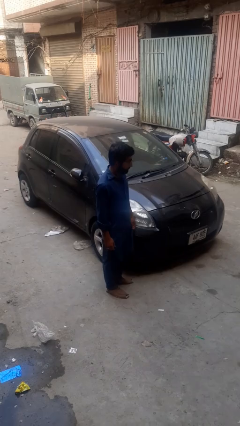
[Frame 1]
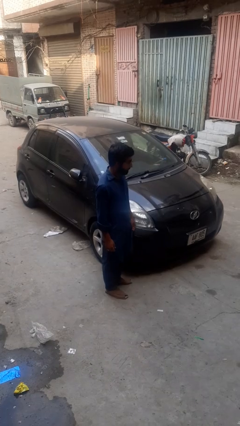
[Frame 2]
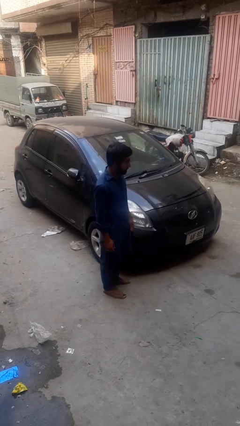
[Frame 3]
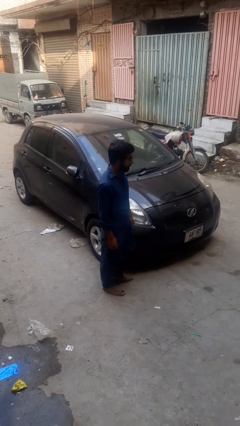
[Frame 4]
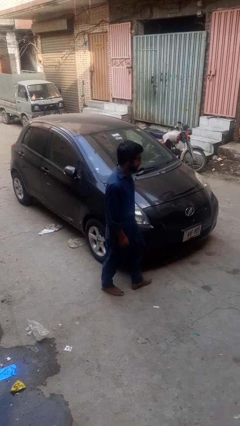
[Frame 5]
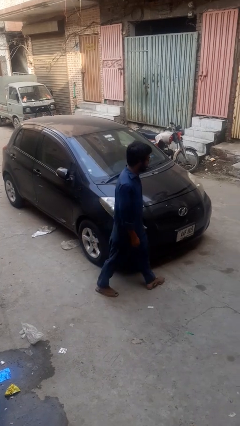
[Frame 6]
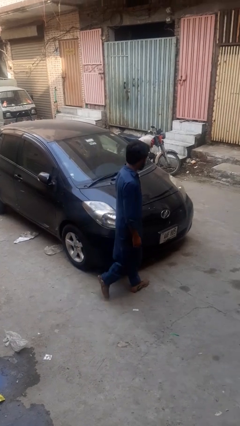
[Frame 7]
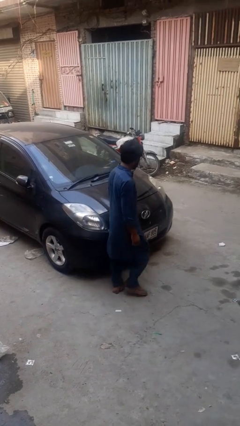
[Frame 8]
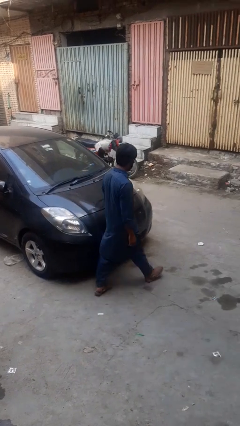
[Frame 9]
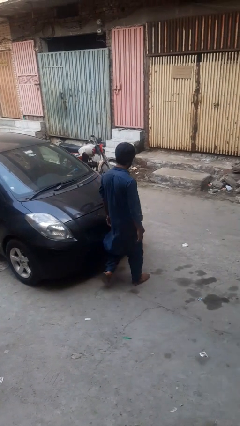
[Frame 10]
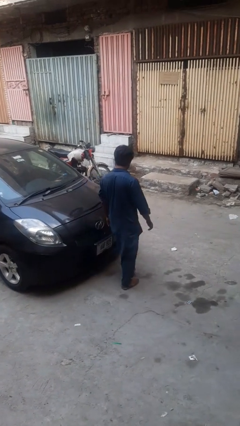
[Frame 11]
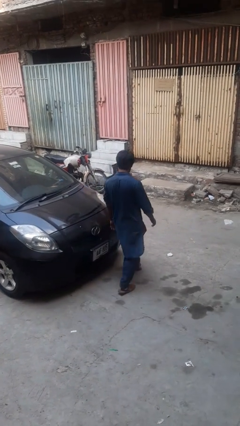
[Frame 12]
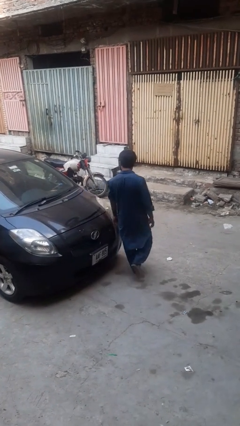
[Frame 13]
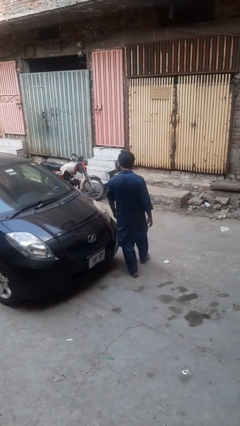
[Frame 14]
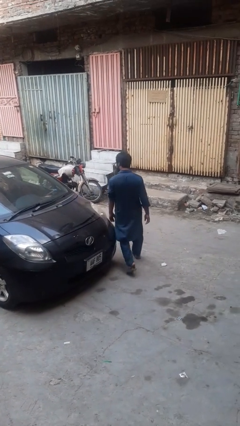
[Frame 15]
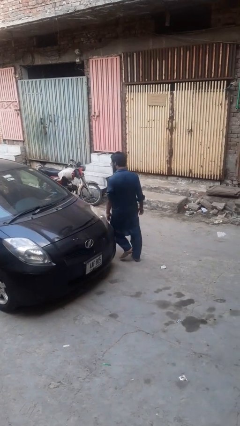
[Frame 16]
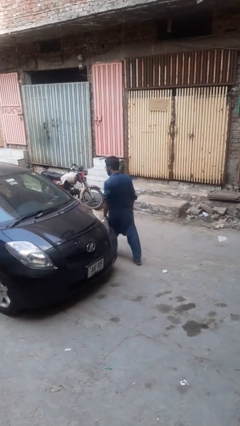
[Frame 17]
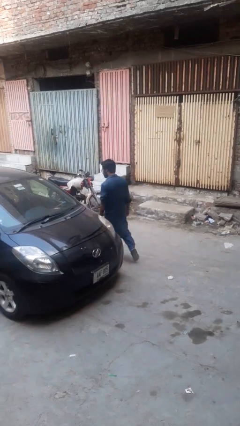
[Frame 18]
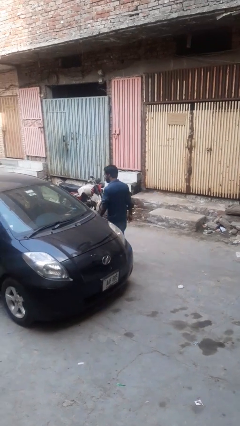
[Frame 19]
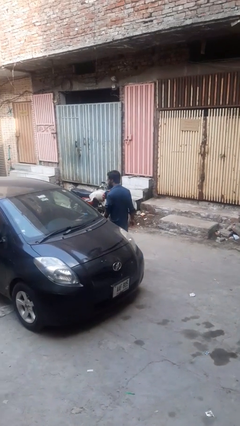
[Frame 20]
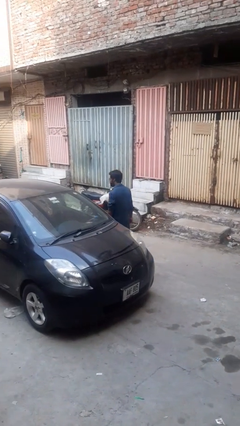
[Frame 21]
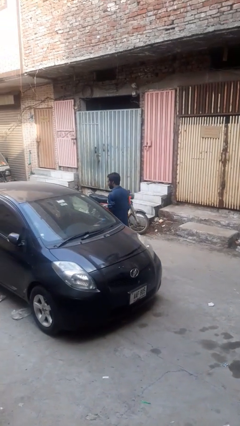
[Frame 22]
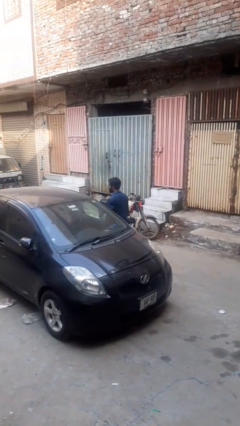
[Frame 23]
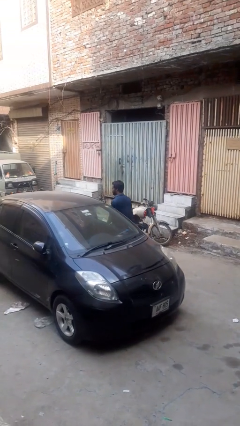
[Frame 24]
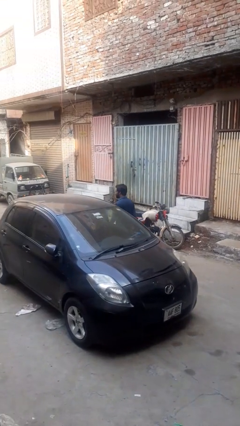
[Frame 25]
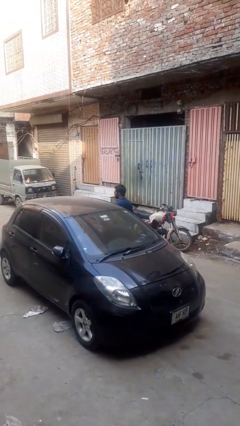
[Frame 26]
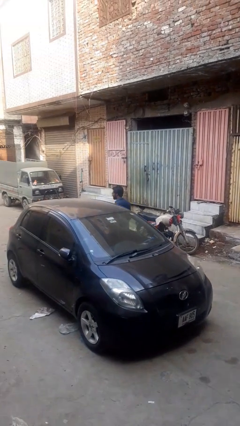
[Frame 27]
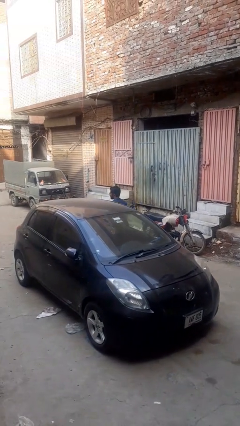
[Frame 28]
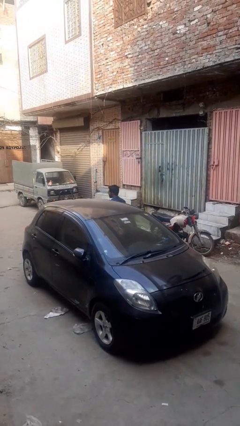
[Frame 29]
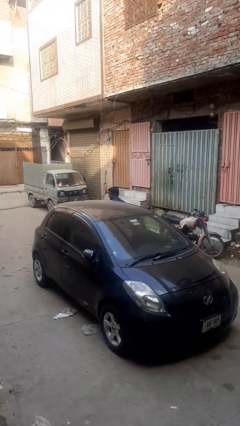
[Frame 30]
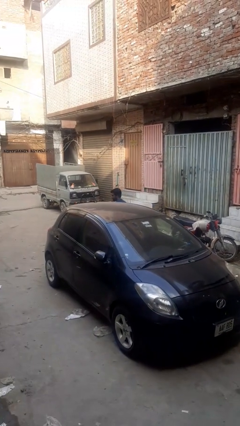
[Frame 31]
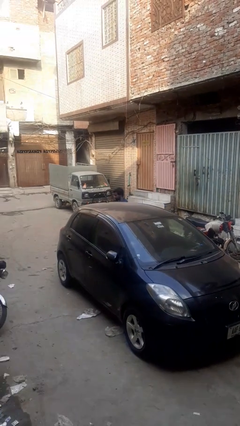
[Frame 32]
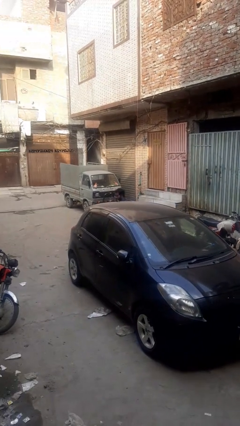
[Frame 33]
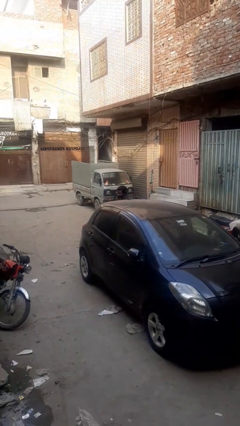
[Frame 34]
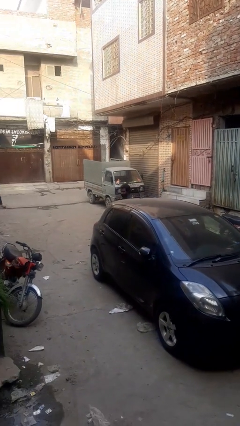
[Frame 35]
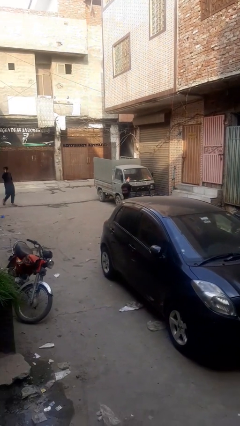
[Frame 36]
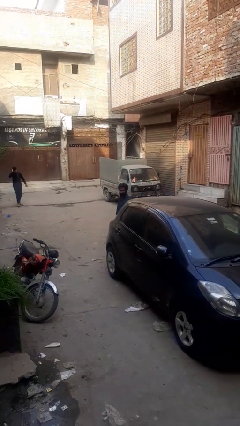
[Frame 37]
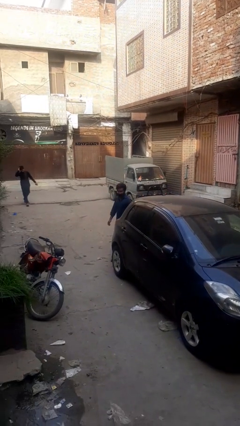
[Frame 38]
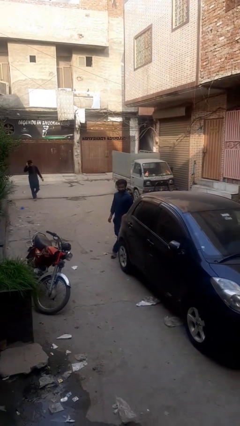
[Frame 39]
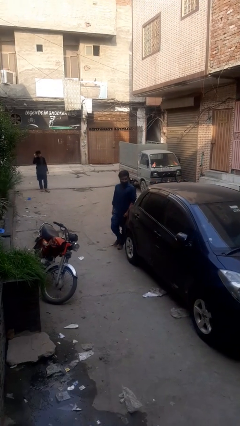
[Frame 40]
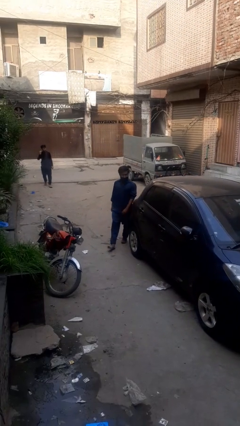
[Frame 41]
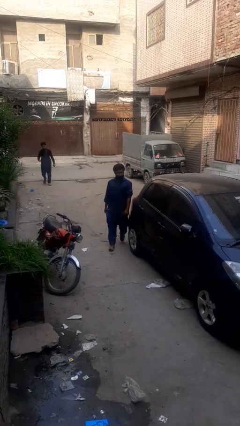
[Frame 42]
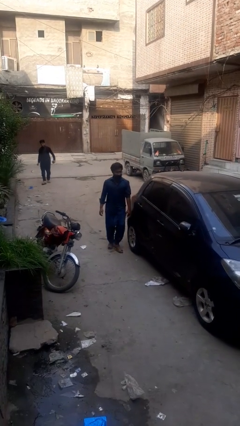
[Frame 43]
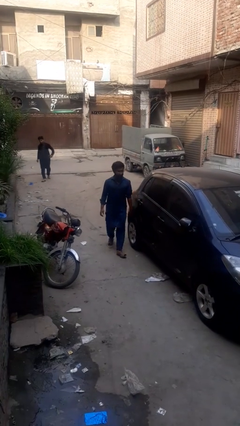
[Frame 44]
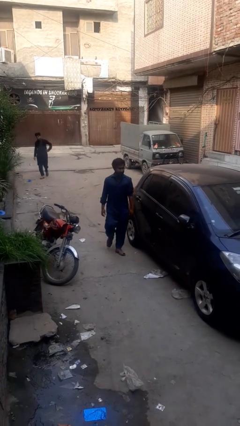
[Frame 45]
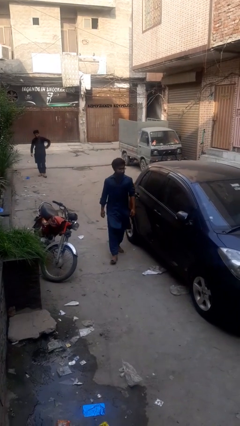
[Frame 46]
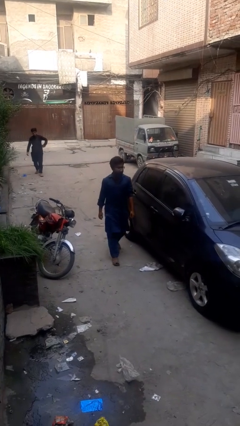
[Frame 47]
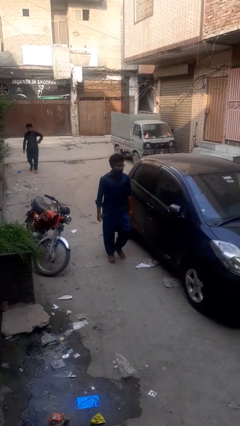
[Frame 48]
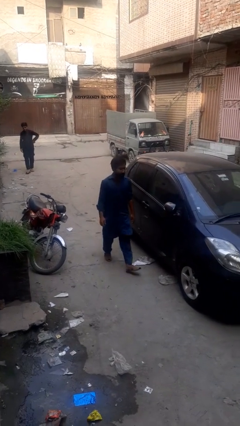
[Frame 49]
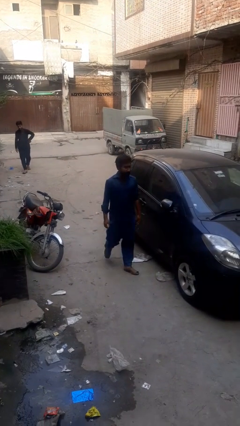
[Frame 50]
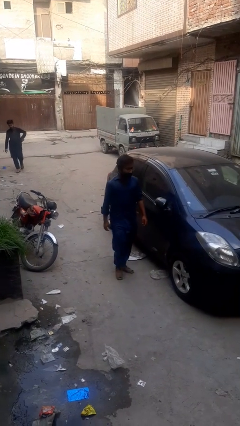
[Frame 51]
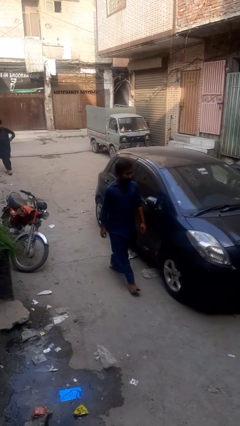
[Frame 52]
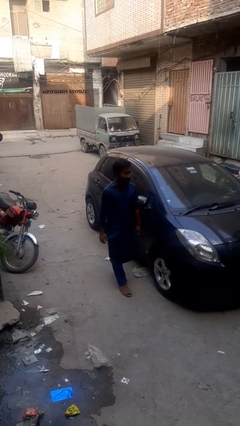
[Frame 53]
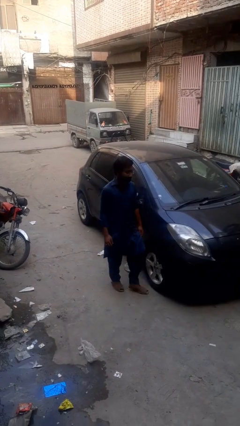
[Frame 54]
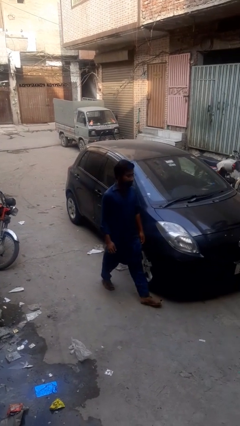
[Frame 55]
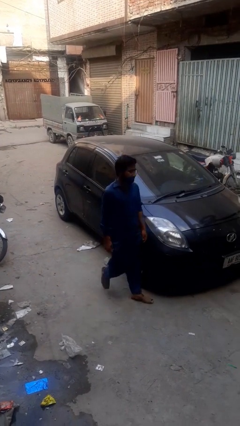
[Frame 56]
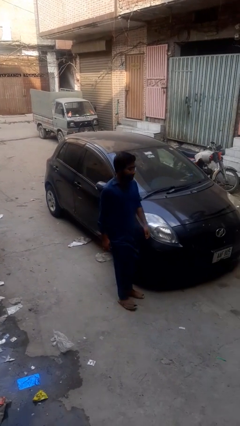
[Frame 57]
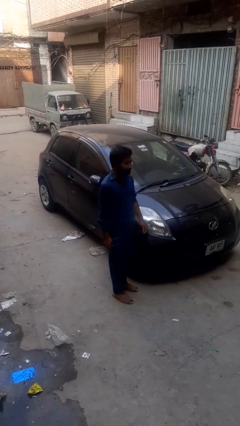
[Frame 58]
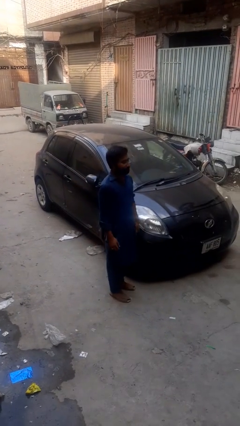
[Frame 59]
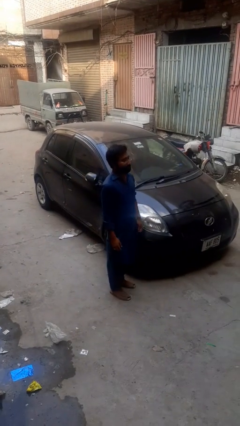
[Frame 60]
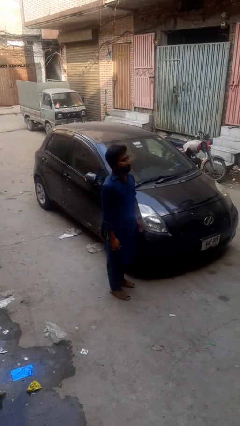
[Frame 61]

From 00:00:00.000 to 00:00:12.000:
person walks around car

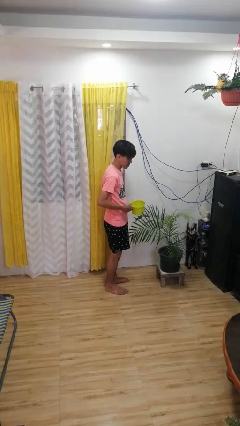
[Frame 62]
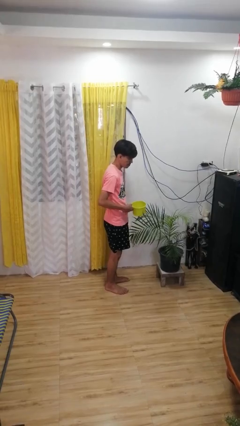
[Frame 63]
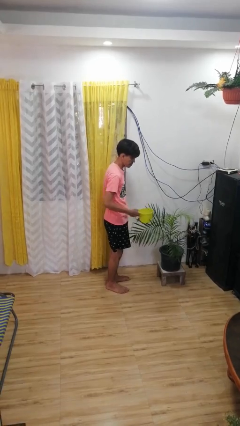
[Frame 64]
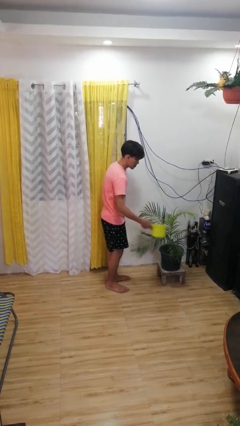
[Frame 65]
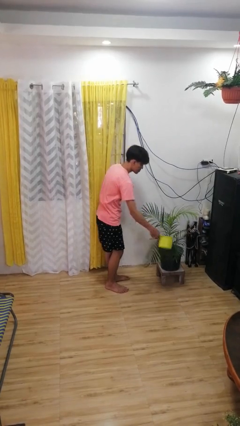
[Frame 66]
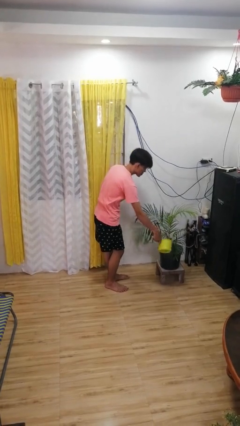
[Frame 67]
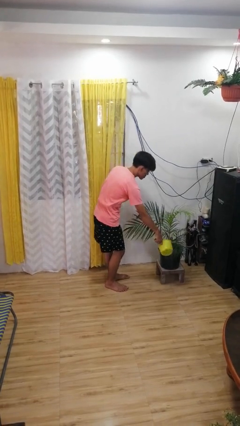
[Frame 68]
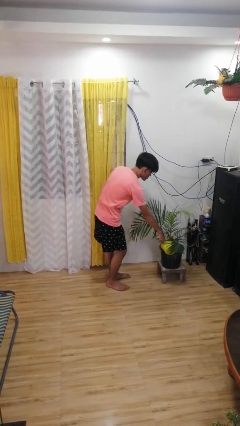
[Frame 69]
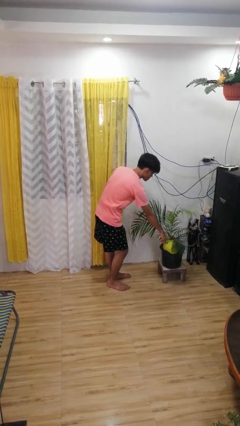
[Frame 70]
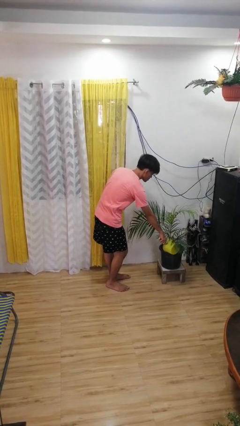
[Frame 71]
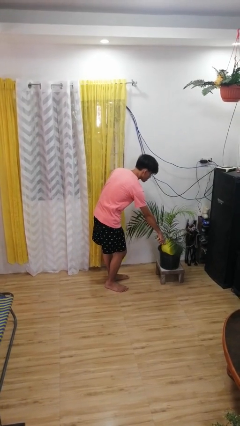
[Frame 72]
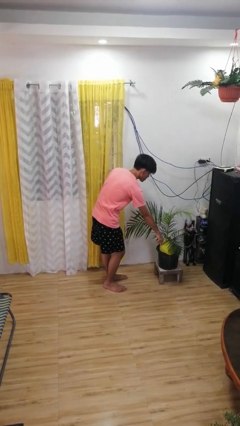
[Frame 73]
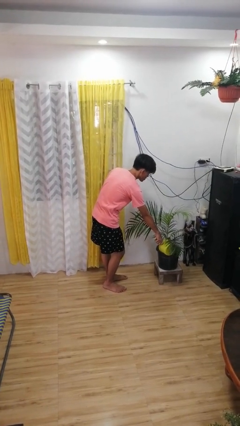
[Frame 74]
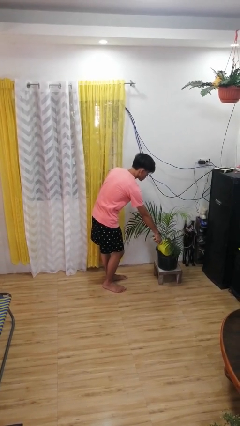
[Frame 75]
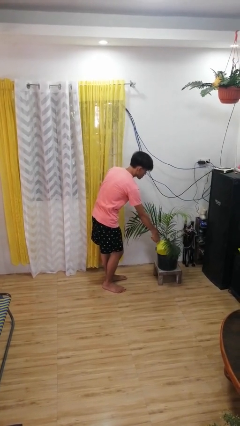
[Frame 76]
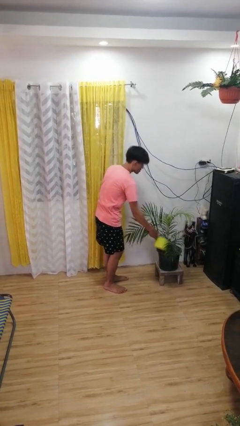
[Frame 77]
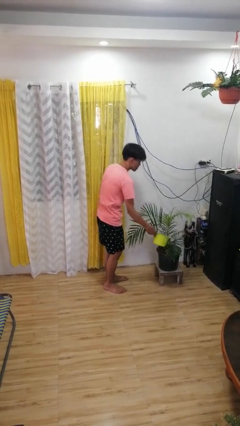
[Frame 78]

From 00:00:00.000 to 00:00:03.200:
person waters houseplant

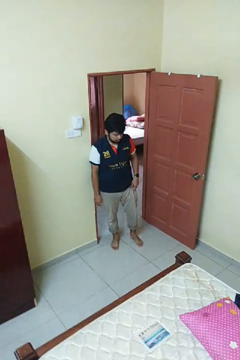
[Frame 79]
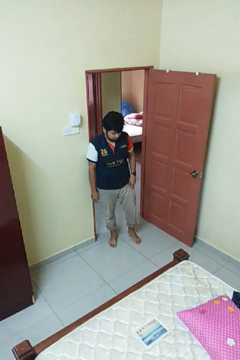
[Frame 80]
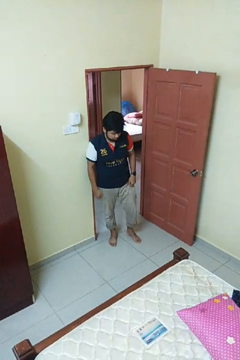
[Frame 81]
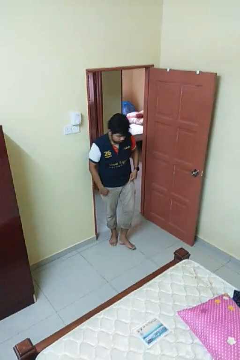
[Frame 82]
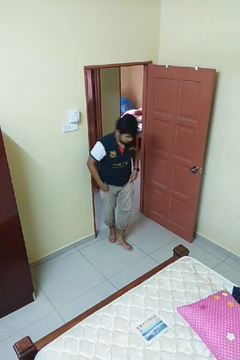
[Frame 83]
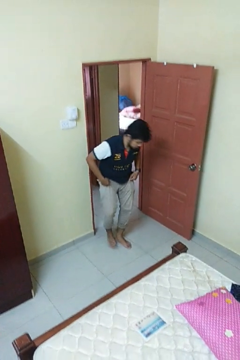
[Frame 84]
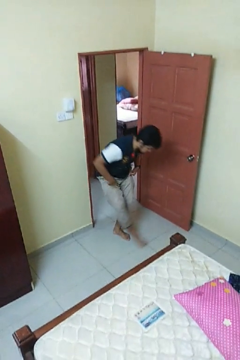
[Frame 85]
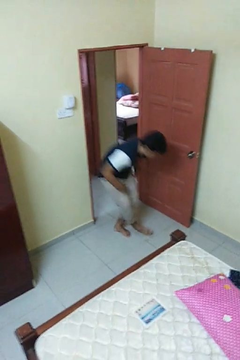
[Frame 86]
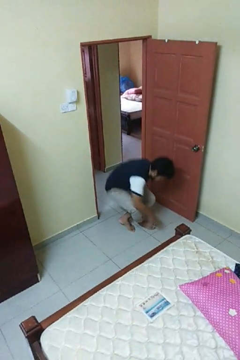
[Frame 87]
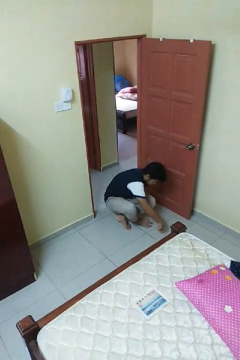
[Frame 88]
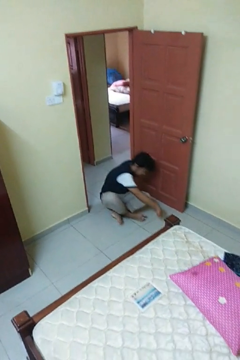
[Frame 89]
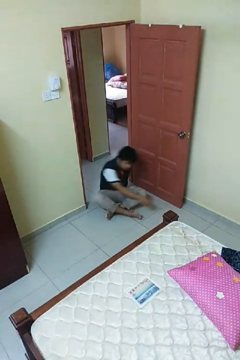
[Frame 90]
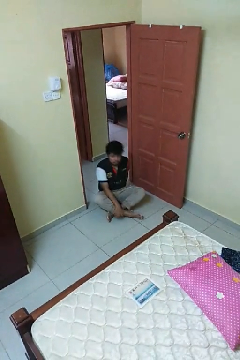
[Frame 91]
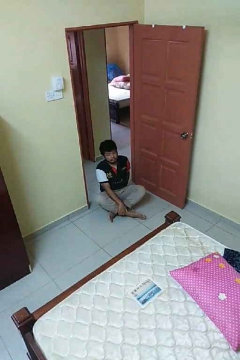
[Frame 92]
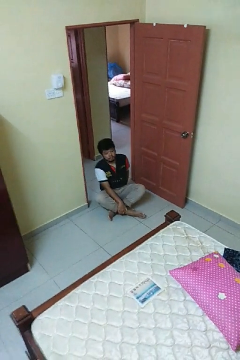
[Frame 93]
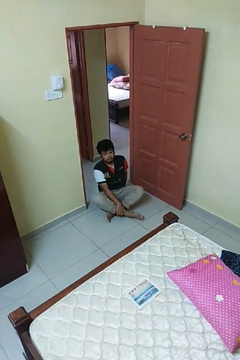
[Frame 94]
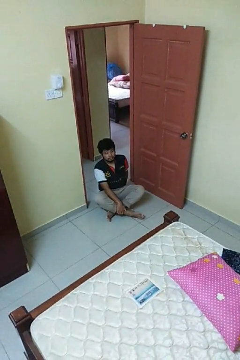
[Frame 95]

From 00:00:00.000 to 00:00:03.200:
person sits crisscross
